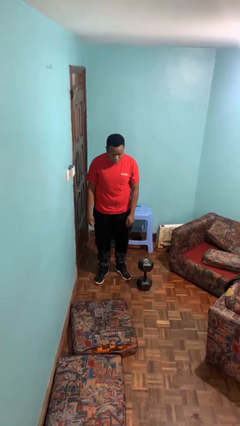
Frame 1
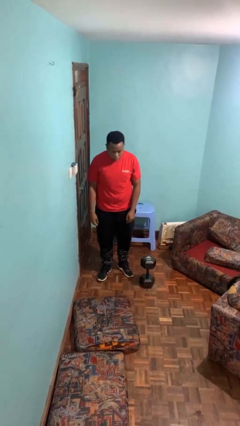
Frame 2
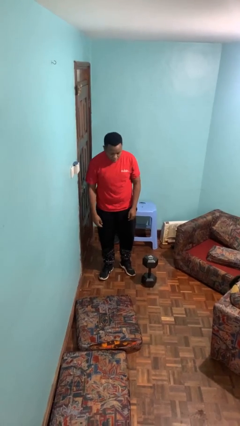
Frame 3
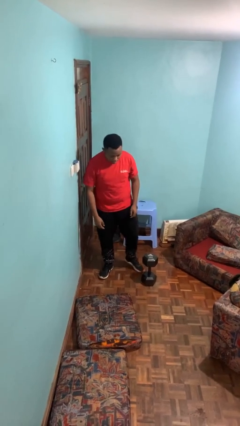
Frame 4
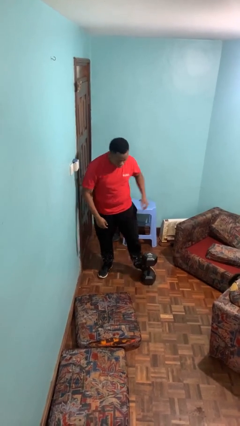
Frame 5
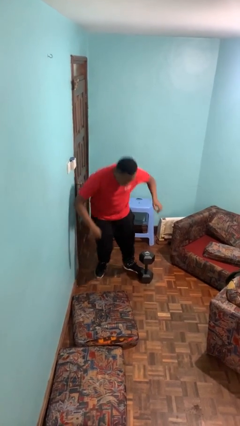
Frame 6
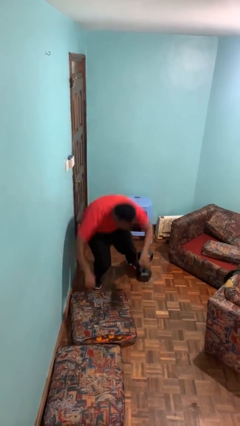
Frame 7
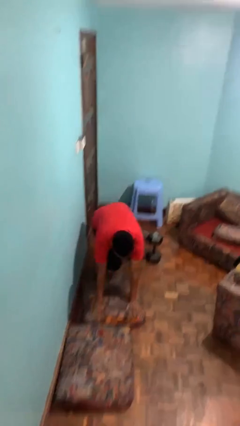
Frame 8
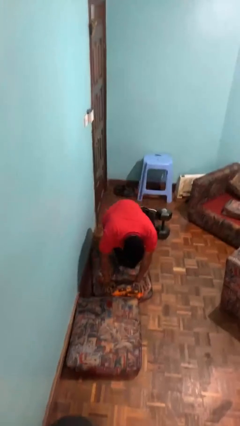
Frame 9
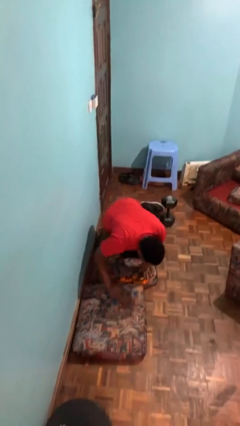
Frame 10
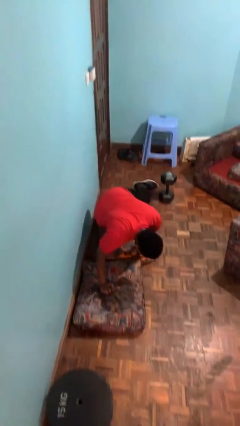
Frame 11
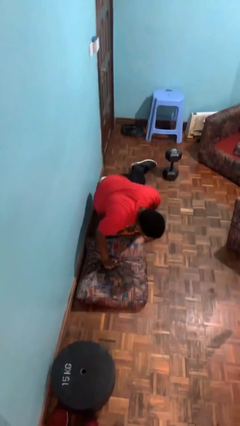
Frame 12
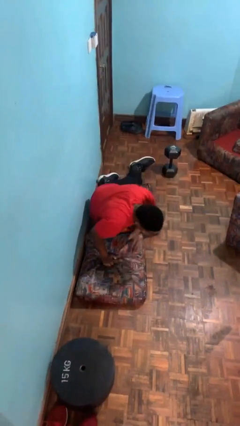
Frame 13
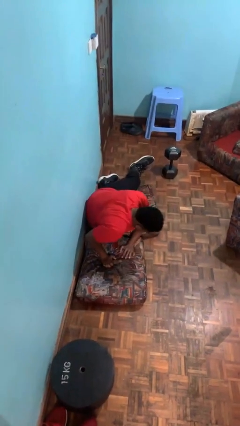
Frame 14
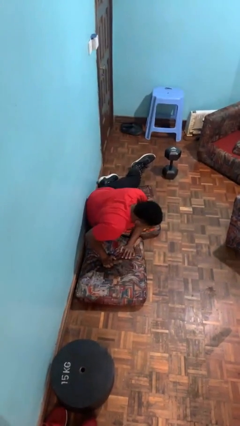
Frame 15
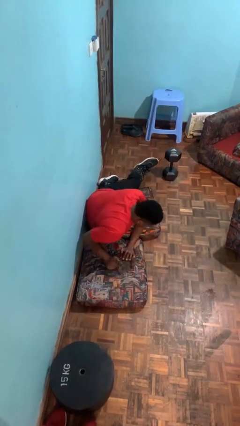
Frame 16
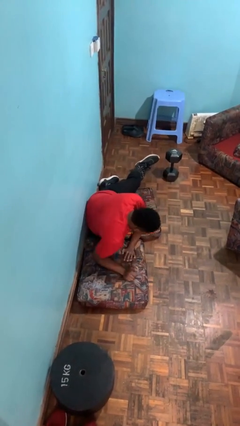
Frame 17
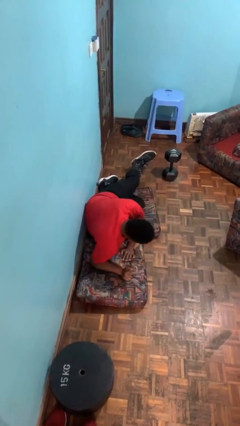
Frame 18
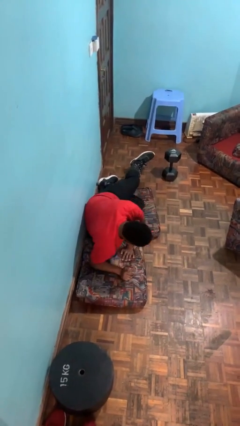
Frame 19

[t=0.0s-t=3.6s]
person trips on object on floor

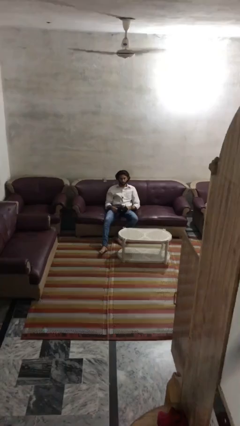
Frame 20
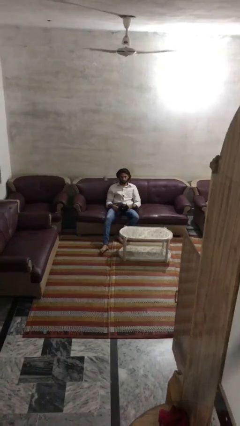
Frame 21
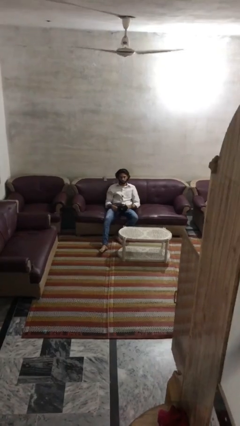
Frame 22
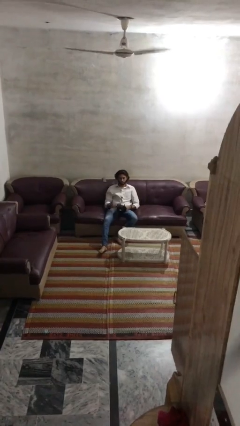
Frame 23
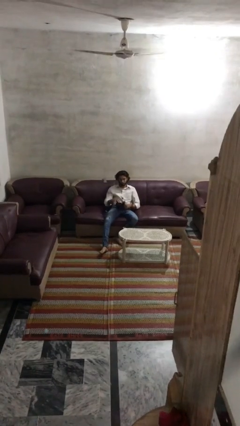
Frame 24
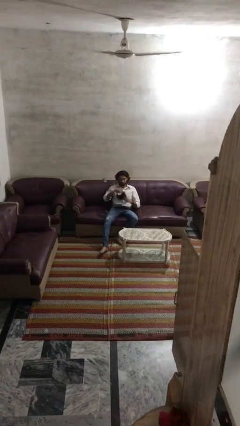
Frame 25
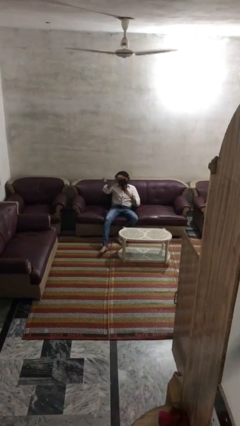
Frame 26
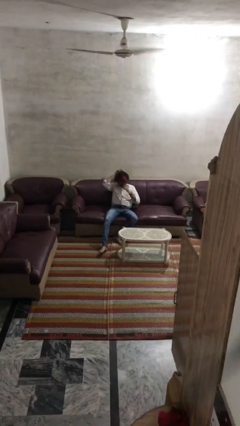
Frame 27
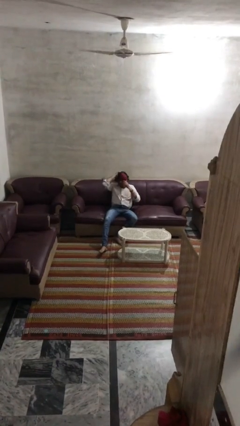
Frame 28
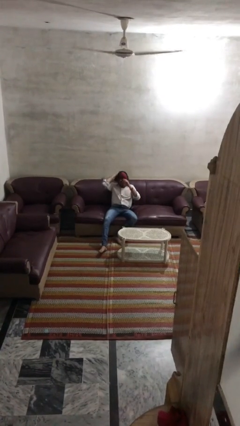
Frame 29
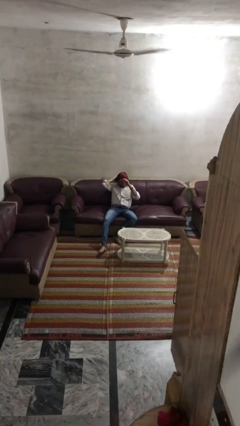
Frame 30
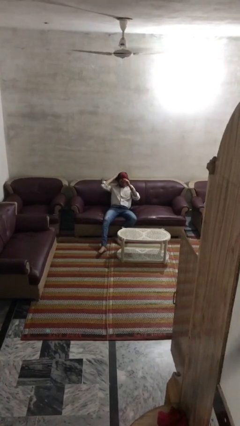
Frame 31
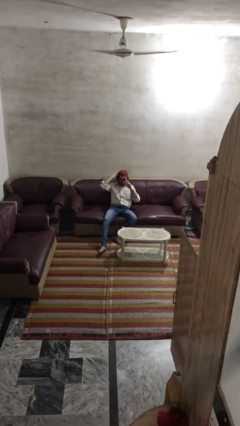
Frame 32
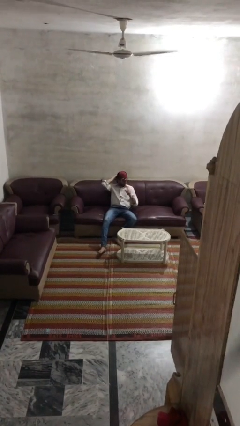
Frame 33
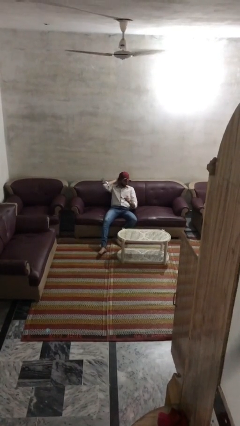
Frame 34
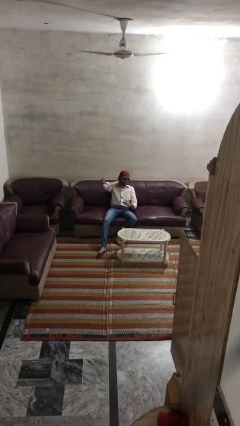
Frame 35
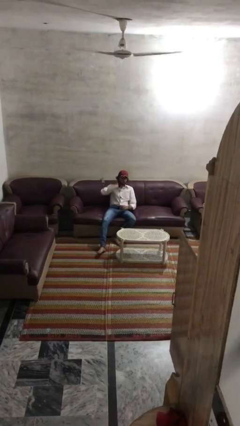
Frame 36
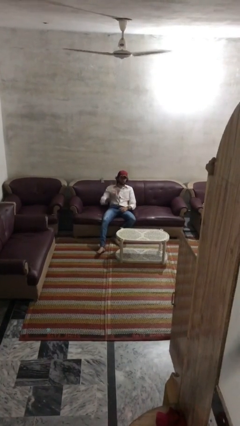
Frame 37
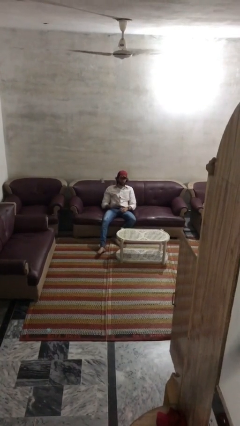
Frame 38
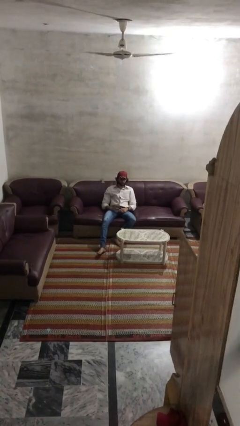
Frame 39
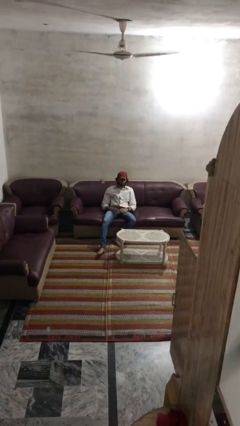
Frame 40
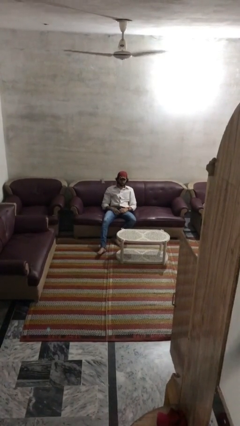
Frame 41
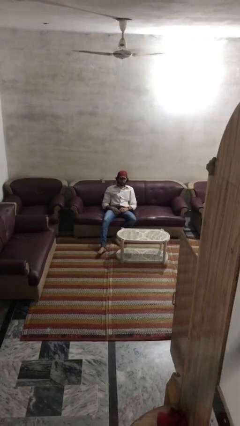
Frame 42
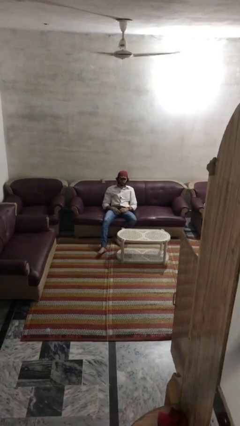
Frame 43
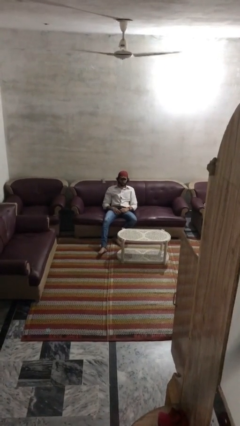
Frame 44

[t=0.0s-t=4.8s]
person puts on hat

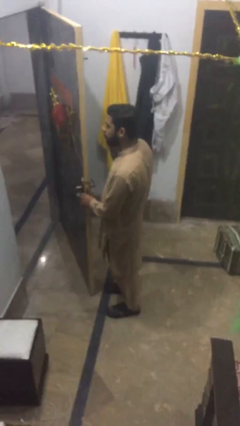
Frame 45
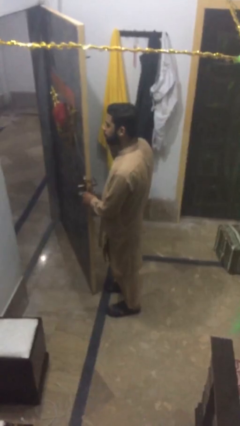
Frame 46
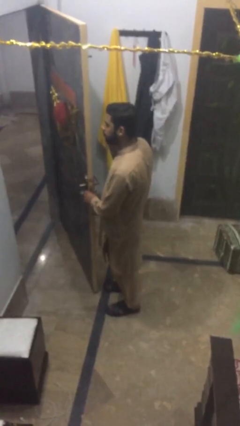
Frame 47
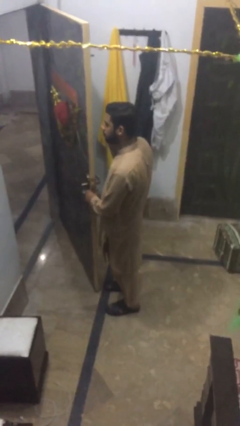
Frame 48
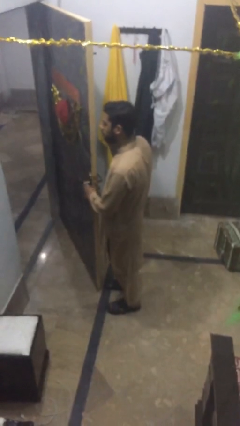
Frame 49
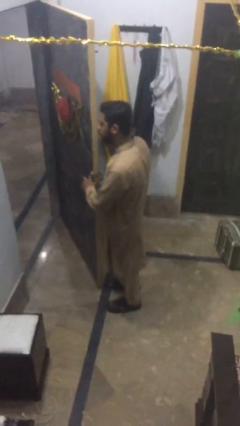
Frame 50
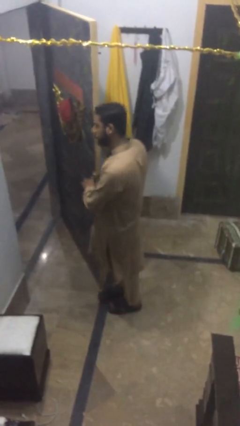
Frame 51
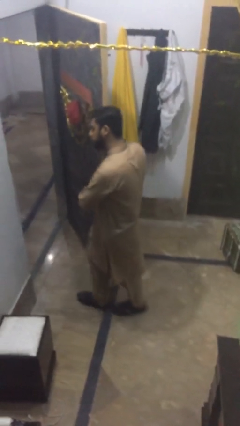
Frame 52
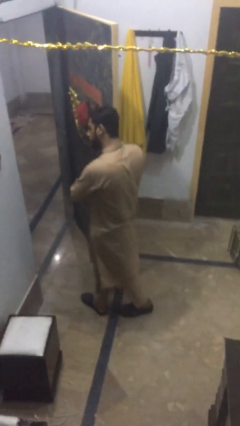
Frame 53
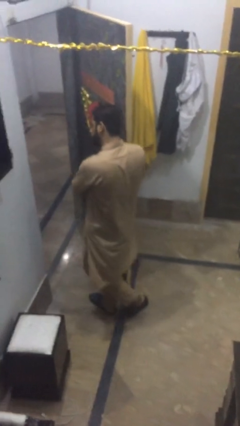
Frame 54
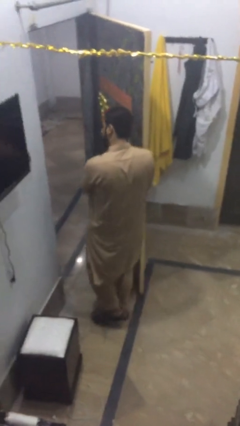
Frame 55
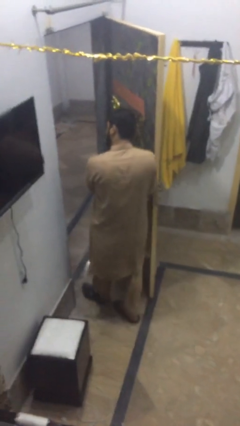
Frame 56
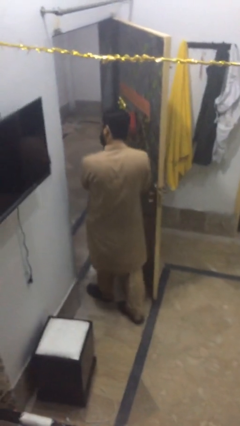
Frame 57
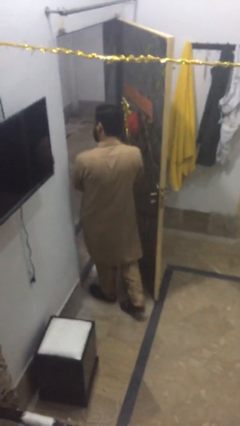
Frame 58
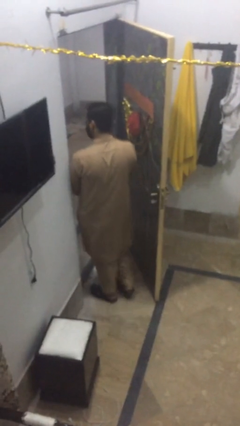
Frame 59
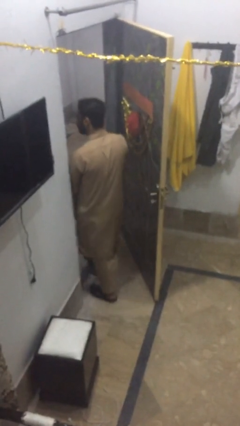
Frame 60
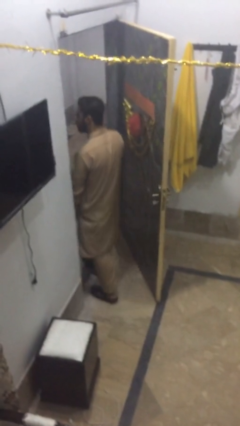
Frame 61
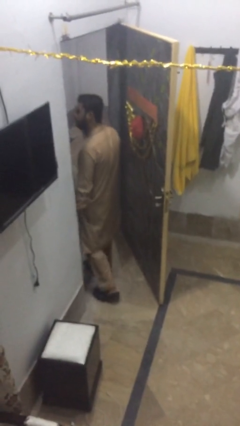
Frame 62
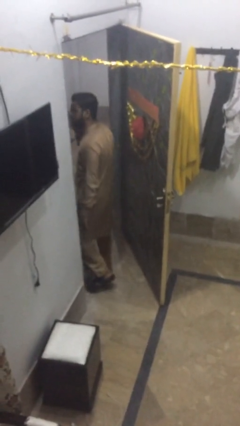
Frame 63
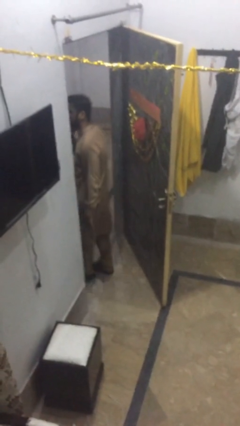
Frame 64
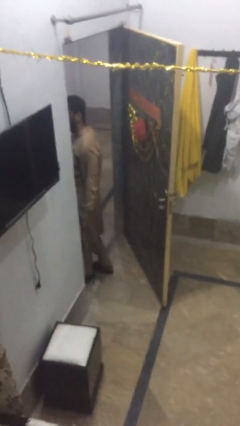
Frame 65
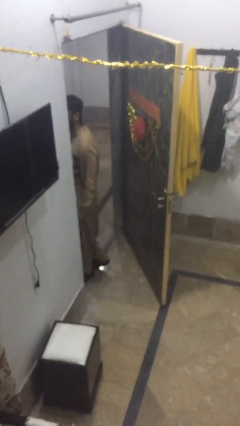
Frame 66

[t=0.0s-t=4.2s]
person exits scene through structure

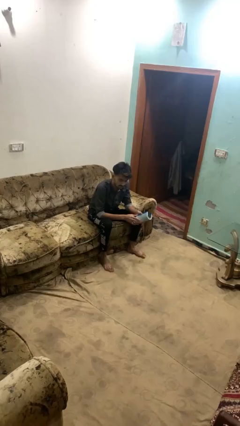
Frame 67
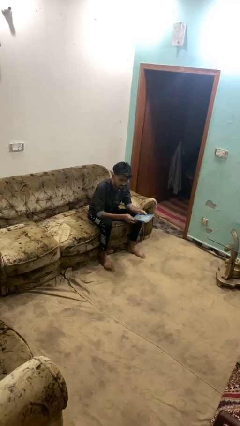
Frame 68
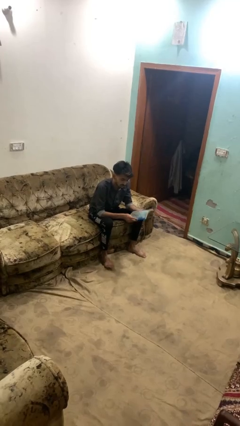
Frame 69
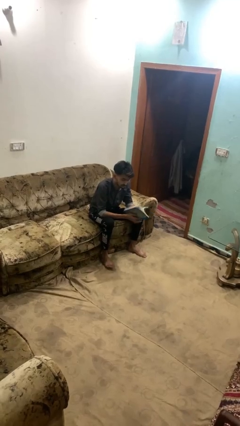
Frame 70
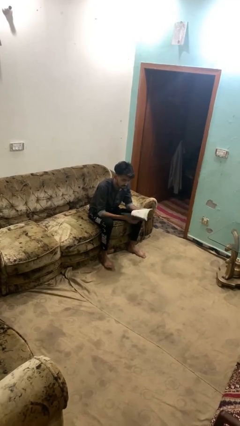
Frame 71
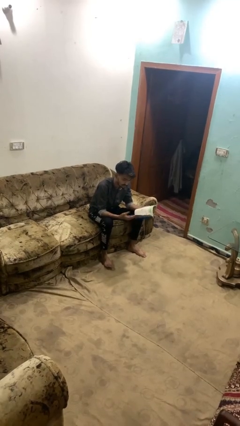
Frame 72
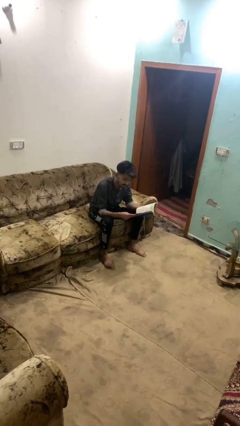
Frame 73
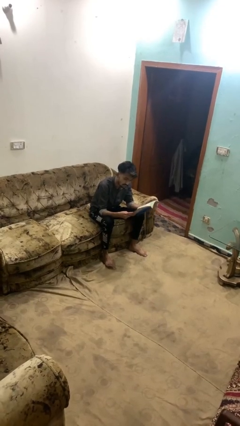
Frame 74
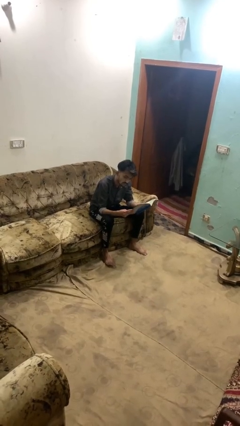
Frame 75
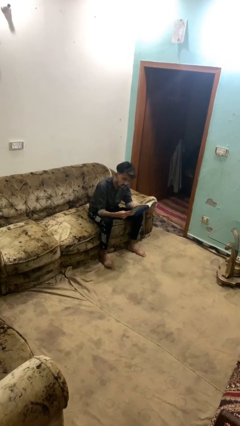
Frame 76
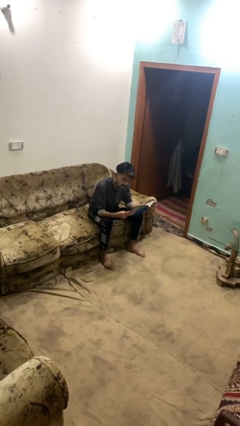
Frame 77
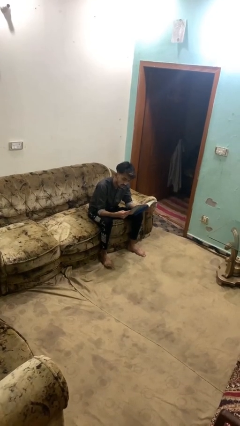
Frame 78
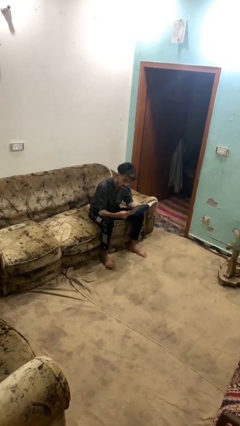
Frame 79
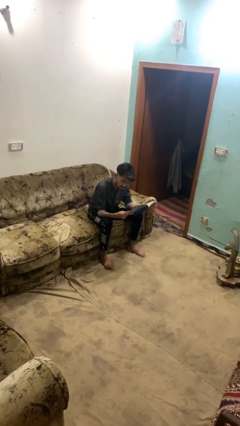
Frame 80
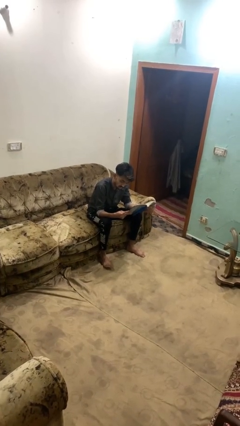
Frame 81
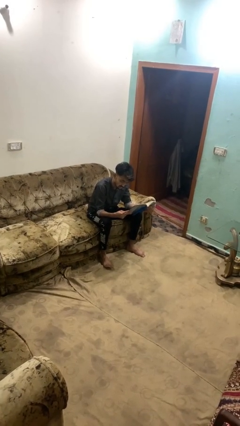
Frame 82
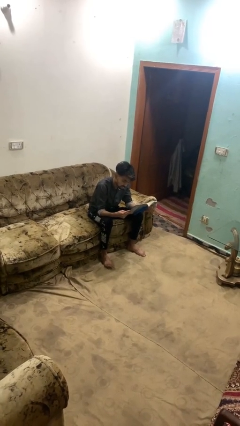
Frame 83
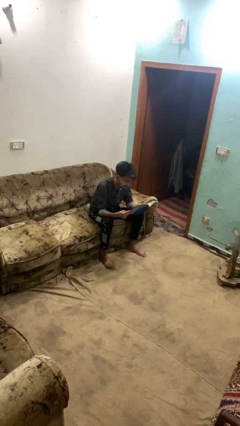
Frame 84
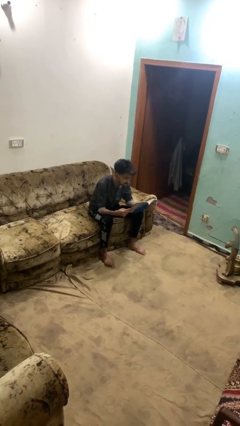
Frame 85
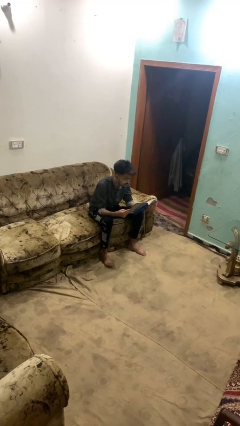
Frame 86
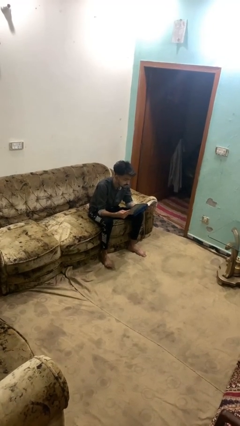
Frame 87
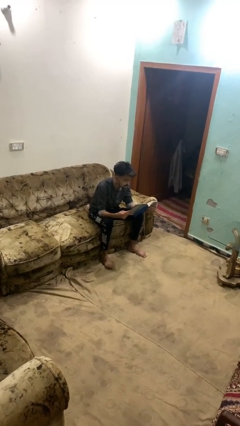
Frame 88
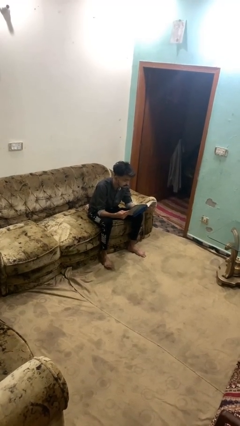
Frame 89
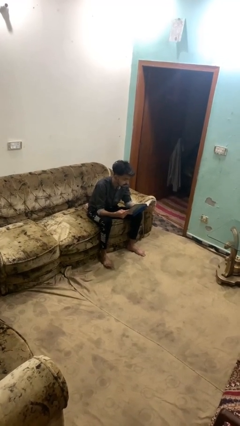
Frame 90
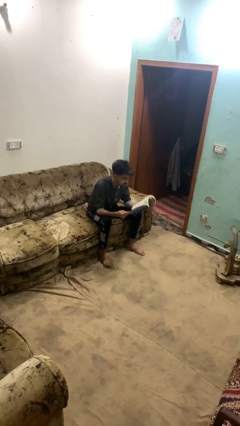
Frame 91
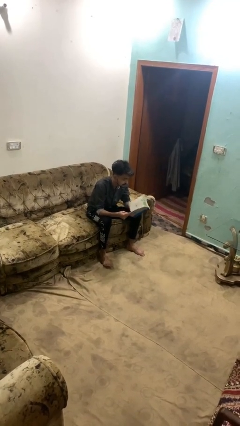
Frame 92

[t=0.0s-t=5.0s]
person reads book
